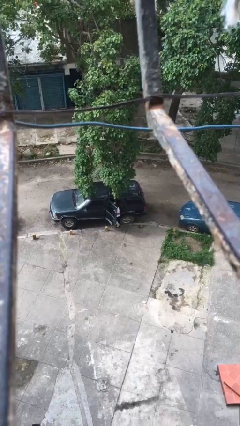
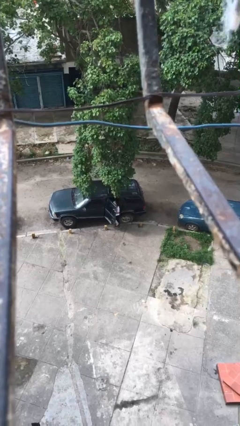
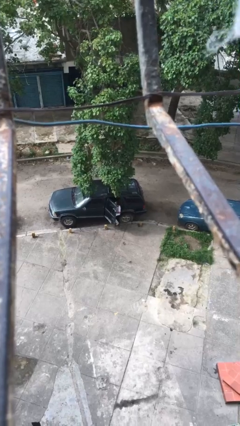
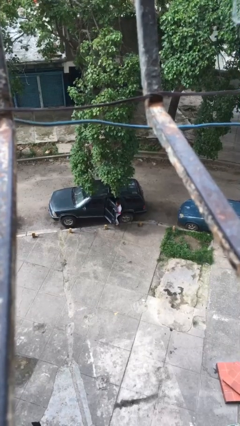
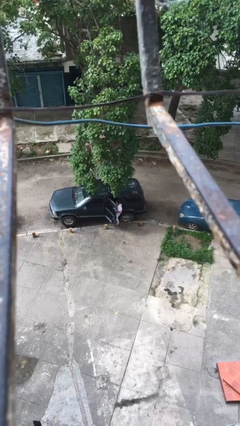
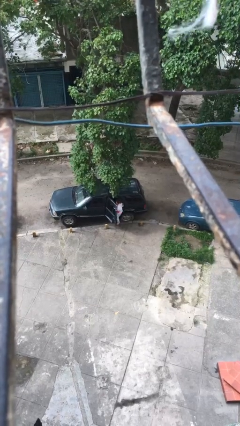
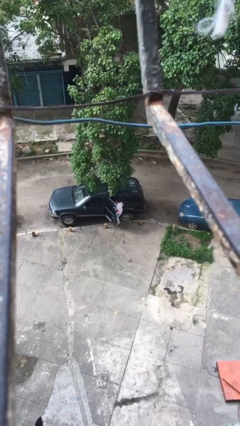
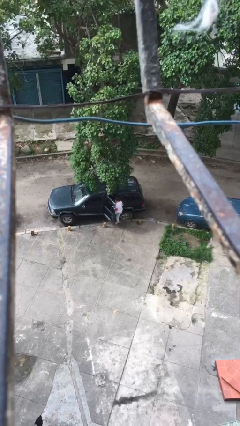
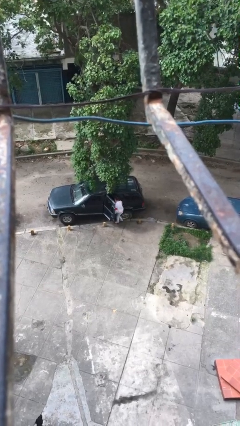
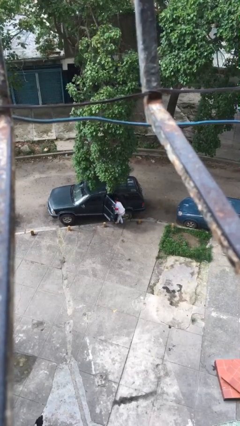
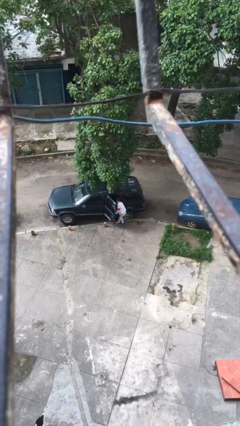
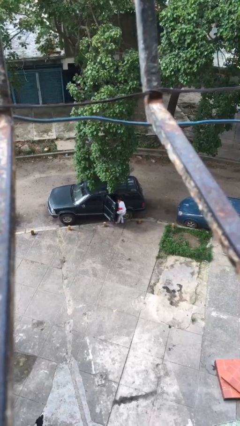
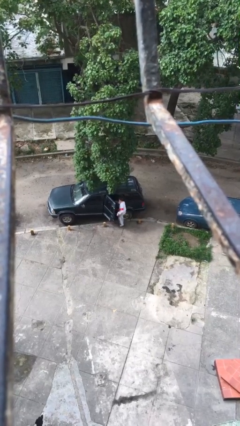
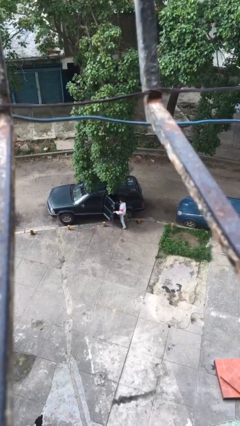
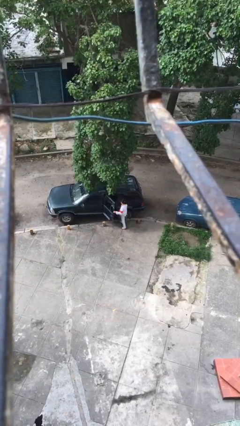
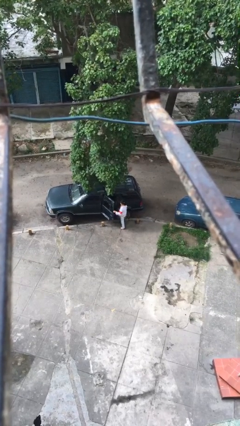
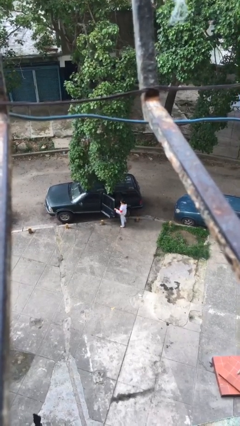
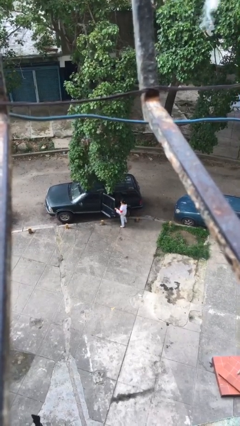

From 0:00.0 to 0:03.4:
person exits car

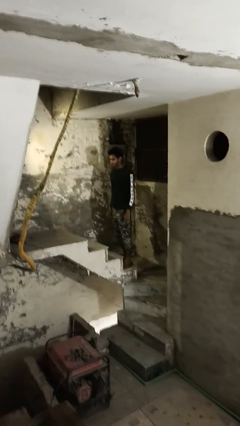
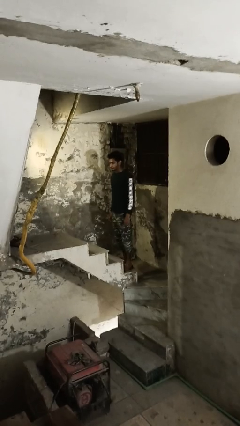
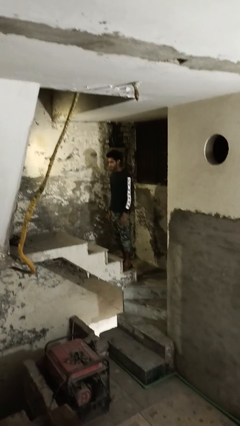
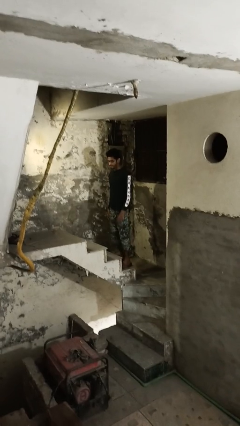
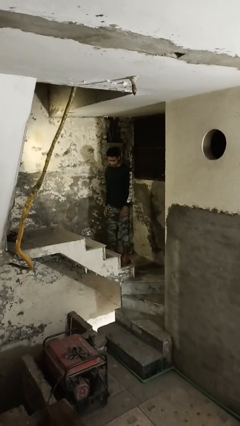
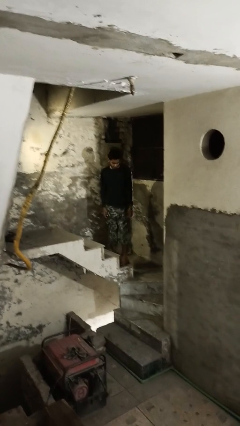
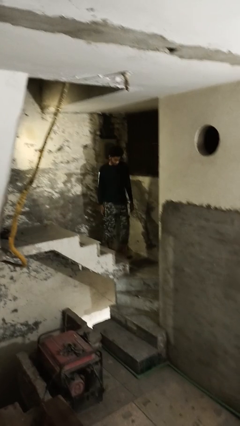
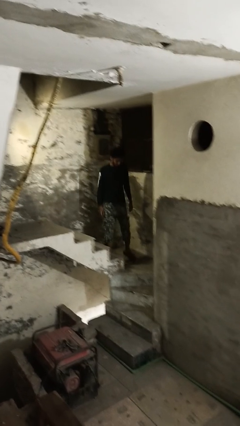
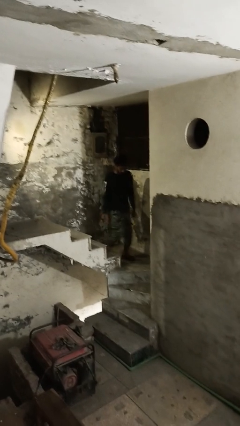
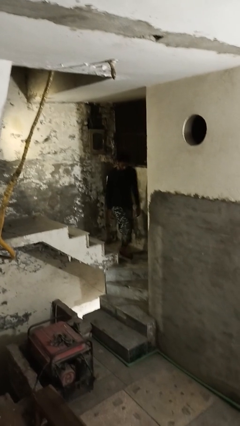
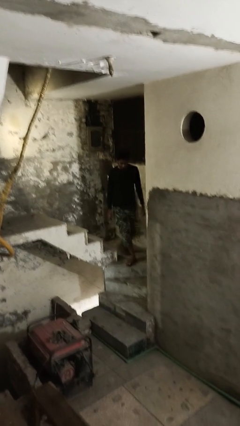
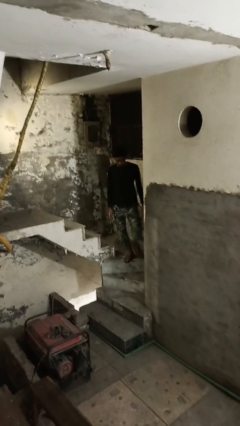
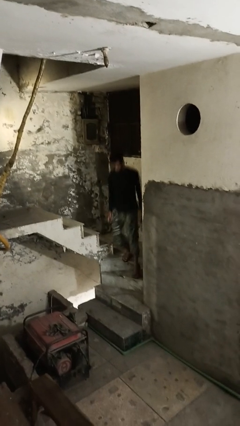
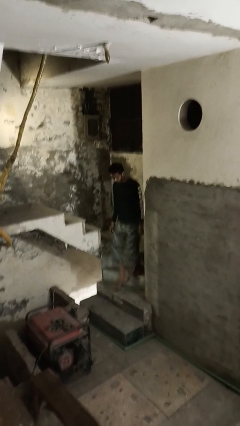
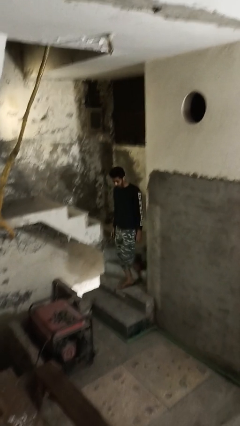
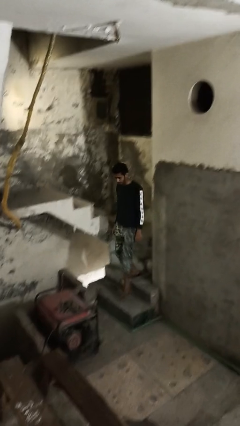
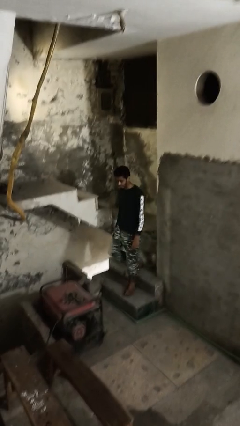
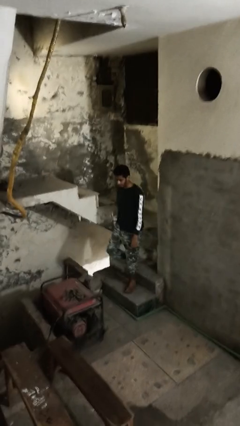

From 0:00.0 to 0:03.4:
person climbs down stairs

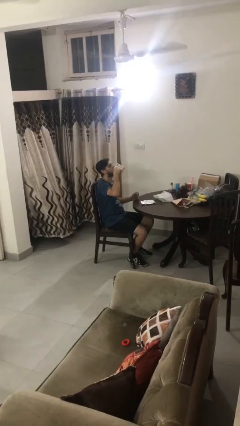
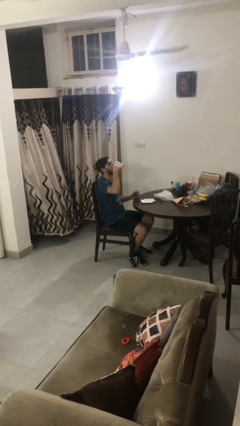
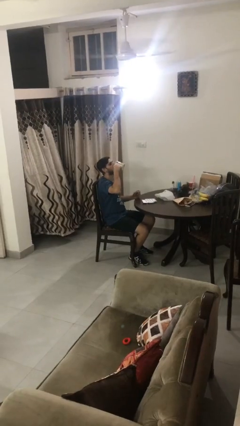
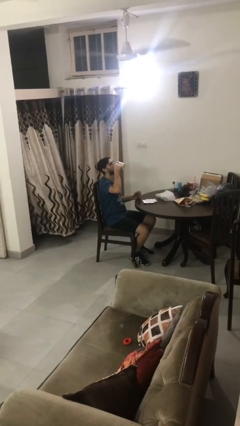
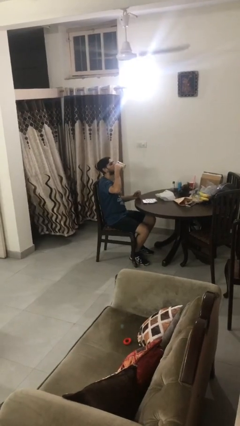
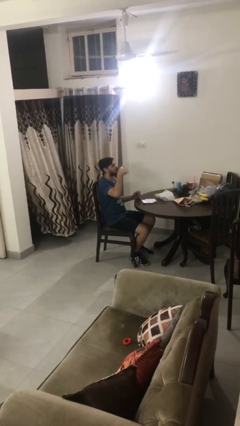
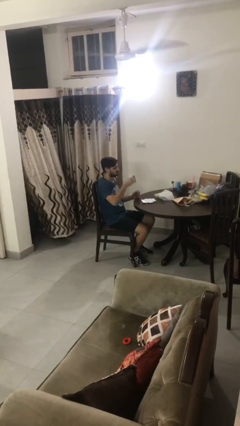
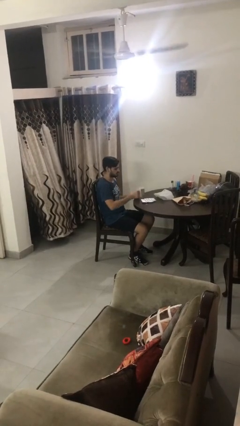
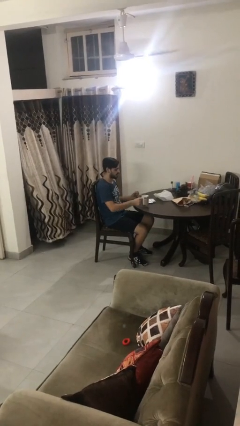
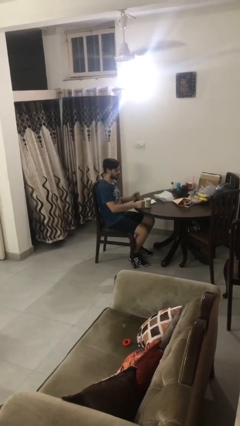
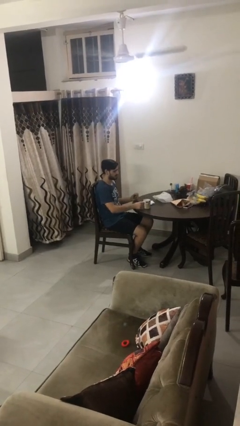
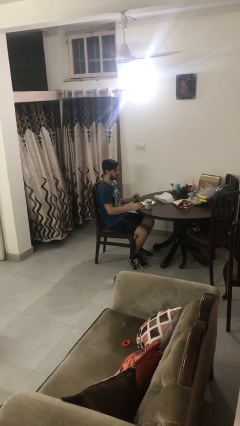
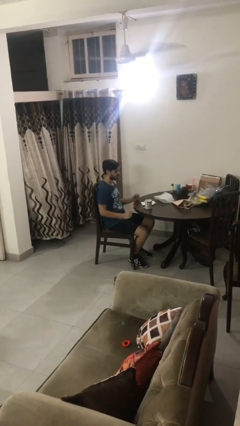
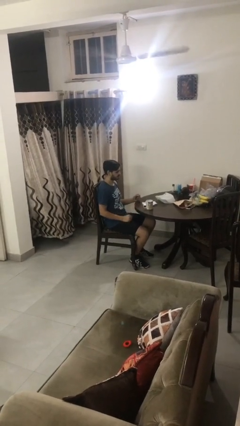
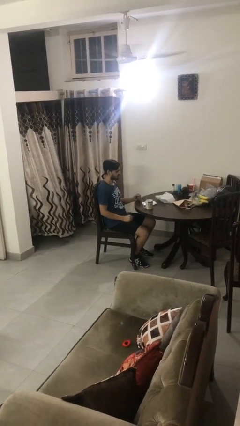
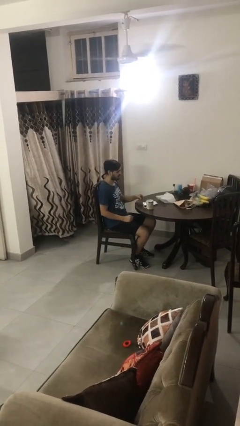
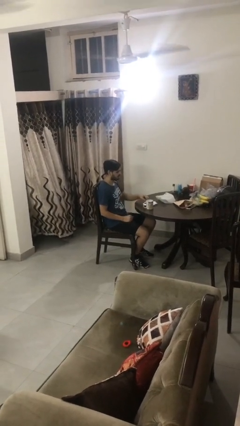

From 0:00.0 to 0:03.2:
person drinks from cup

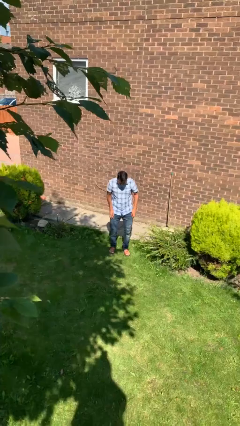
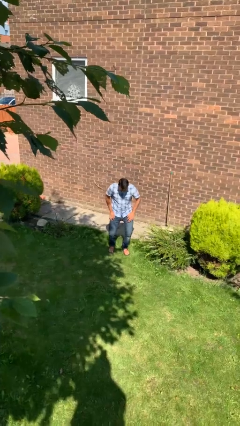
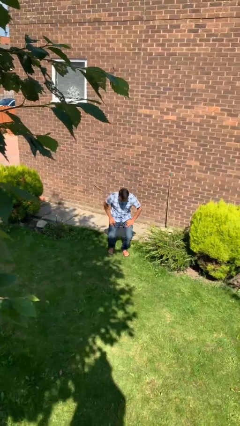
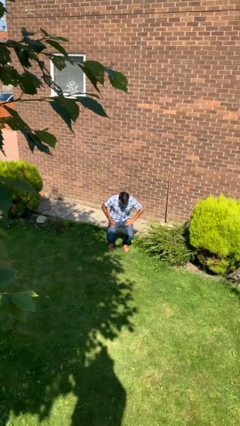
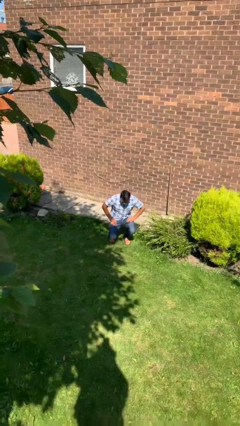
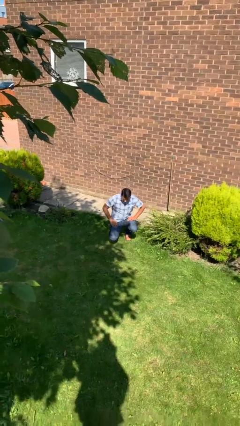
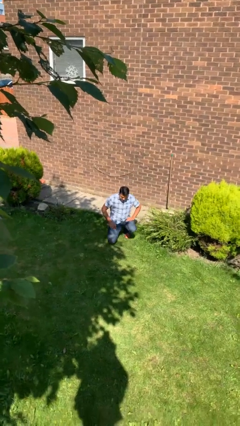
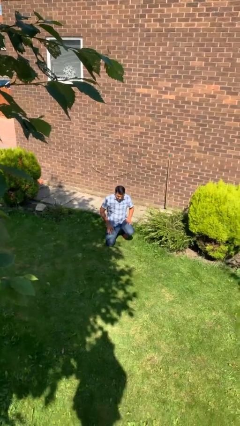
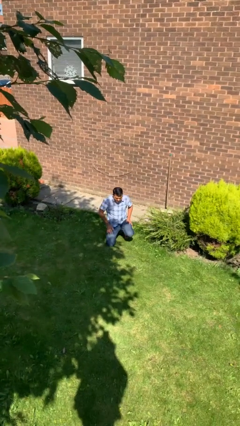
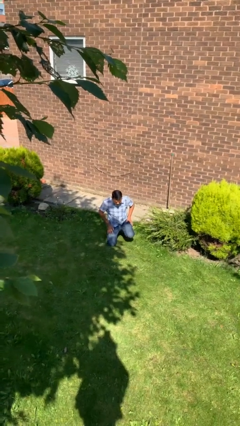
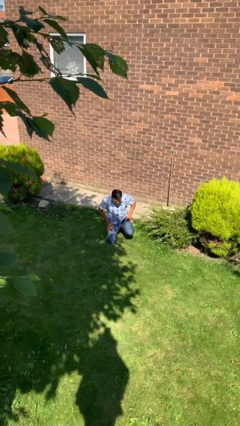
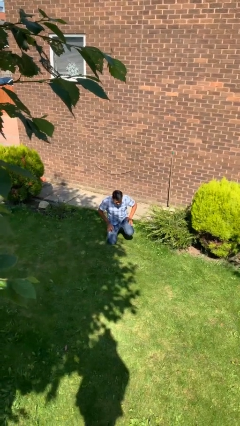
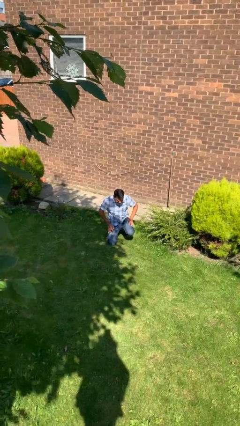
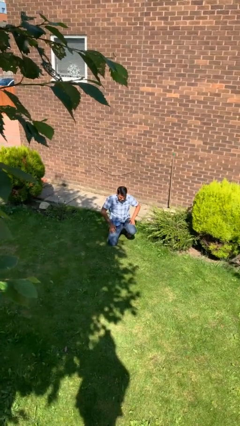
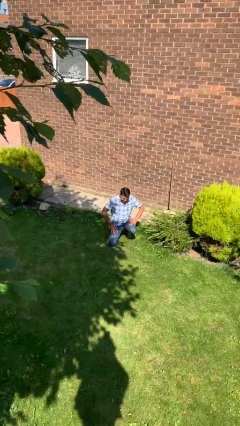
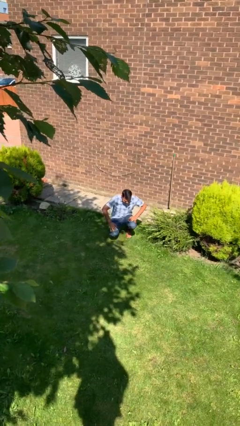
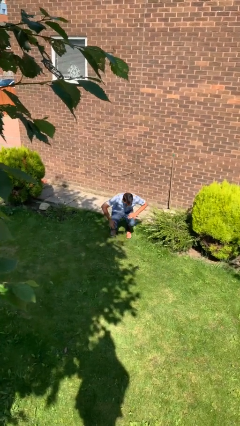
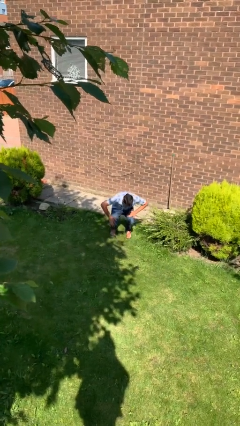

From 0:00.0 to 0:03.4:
person kneels

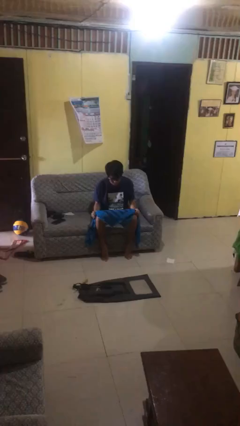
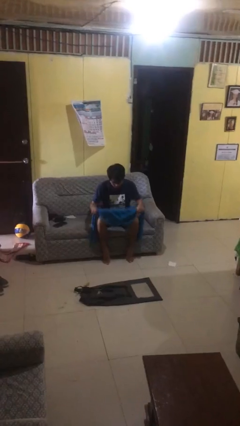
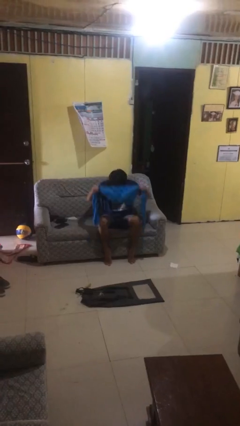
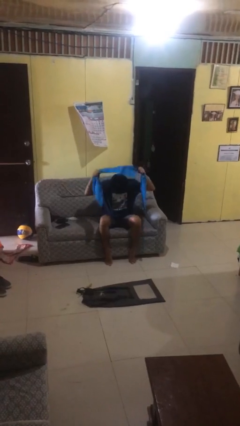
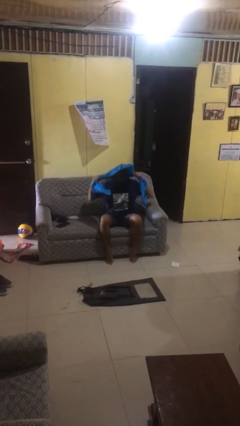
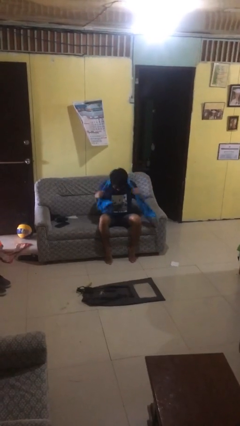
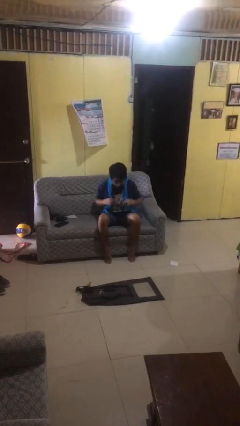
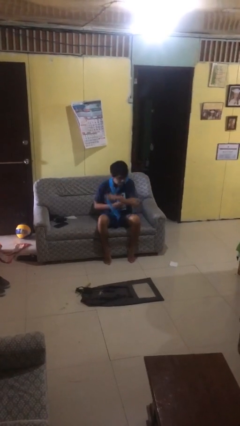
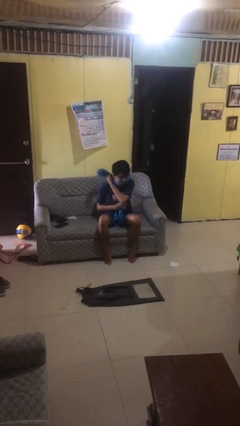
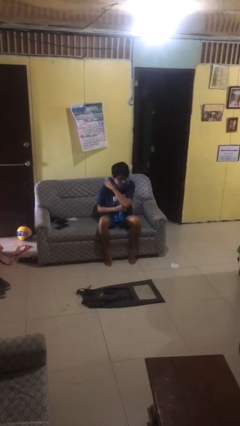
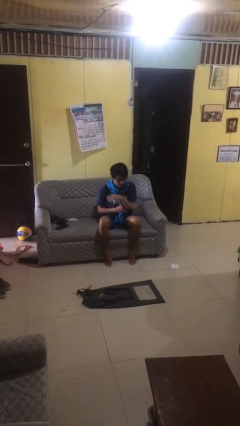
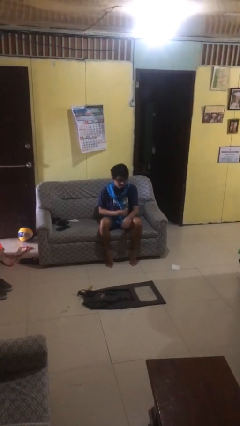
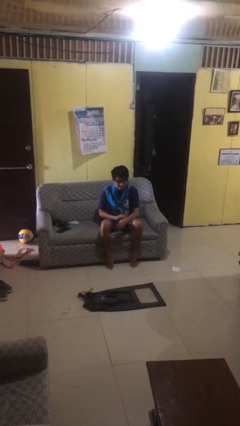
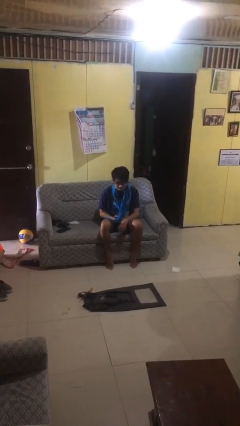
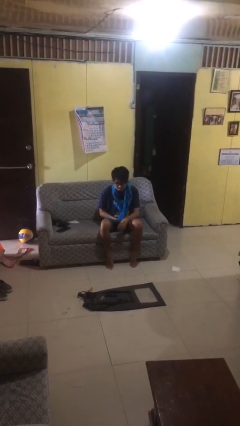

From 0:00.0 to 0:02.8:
person puts on scarf

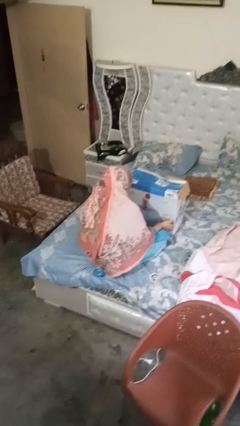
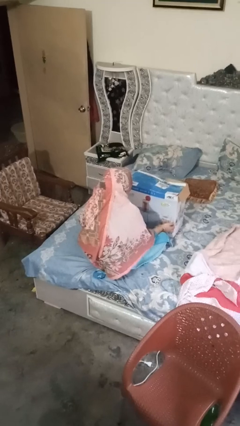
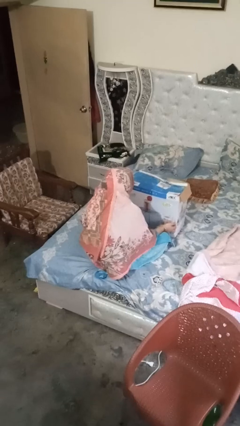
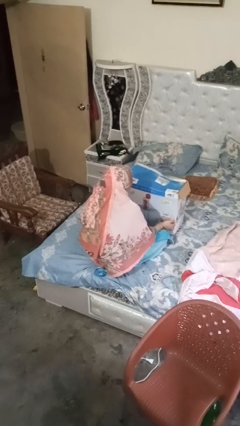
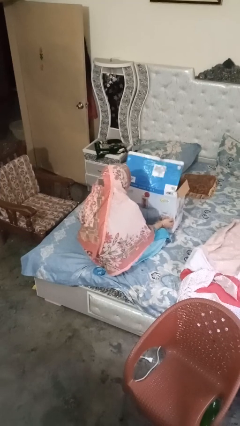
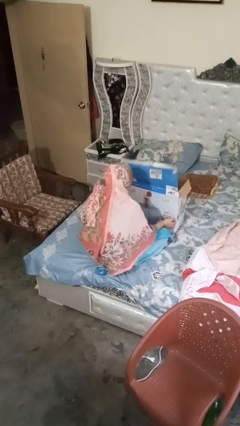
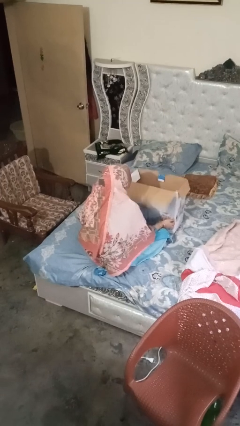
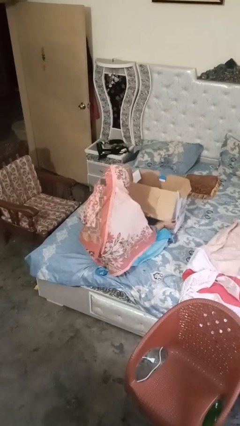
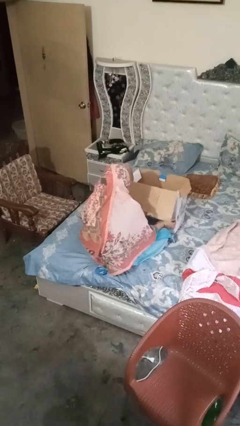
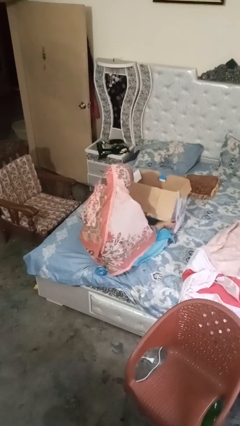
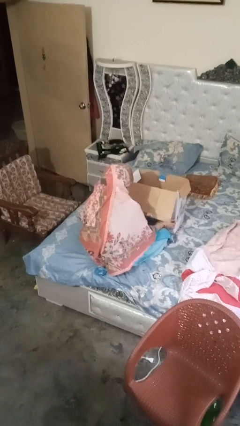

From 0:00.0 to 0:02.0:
person opens box
